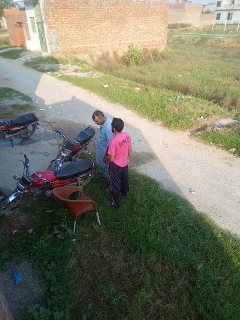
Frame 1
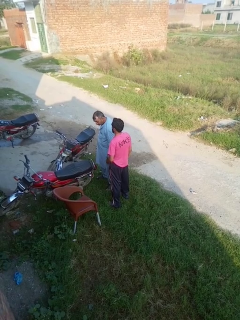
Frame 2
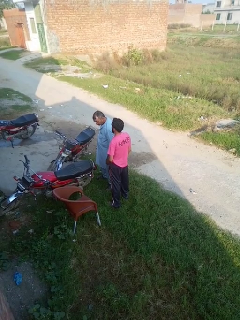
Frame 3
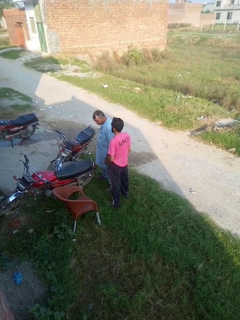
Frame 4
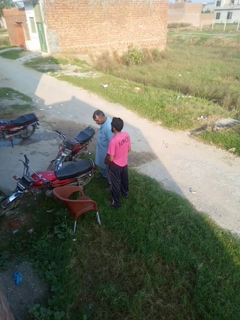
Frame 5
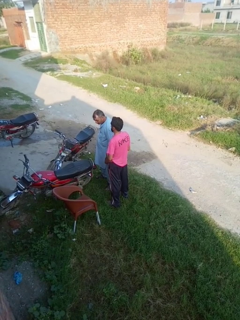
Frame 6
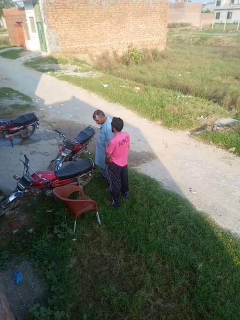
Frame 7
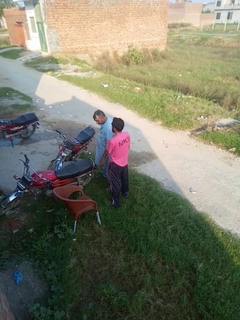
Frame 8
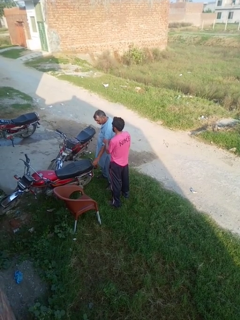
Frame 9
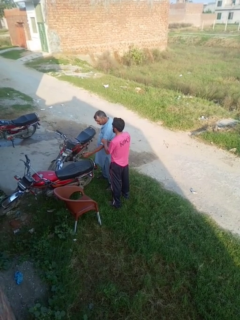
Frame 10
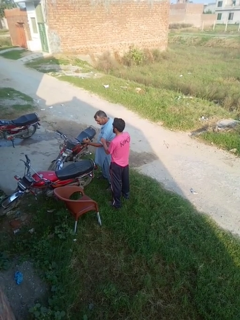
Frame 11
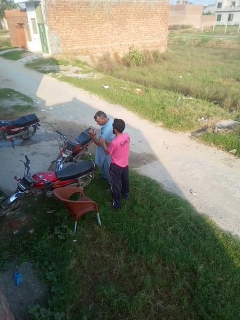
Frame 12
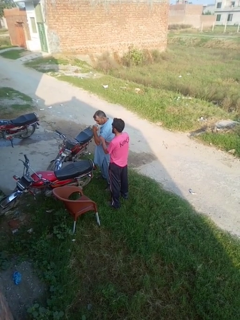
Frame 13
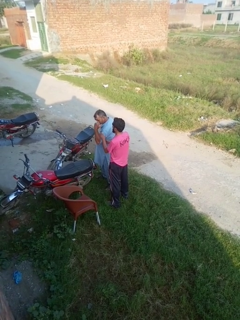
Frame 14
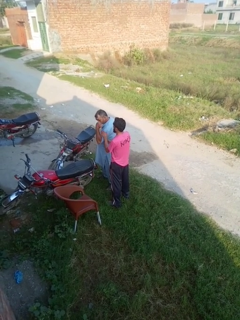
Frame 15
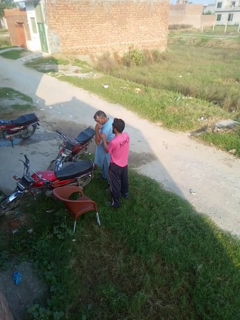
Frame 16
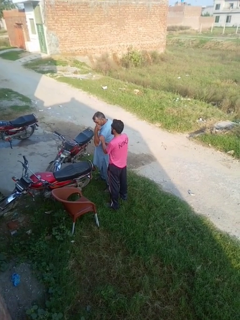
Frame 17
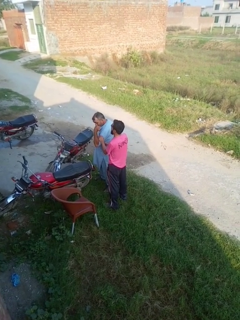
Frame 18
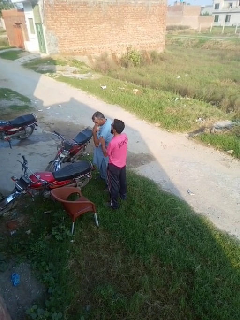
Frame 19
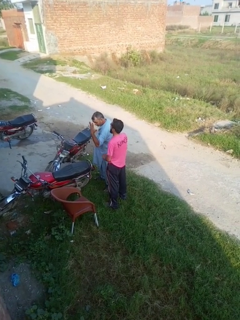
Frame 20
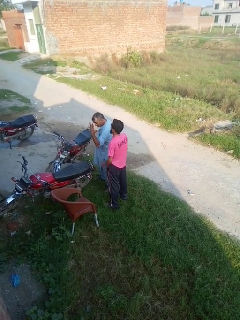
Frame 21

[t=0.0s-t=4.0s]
person grabs person by bicep

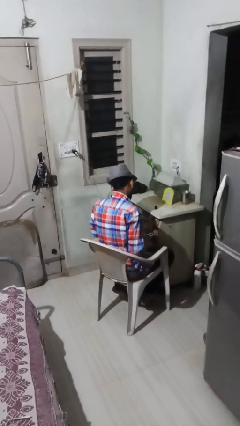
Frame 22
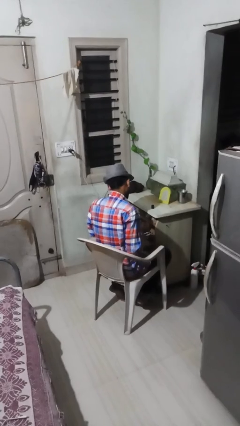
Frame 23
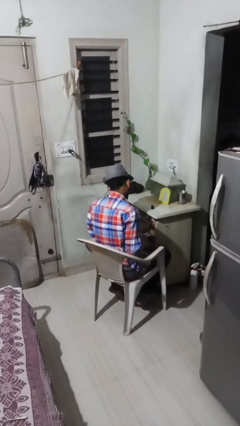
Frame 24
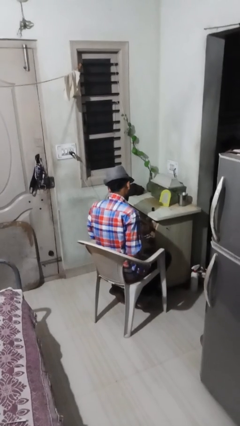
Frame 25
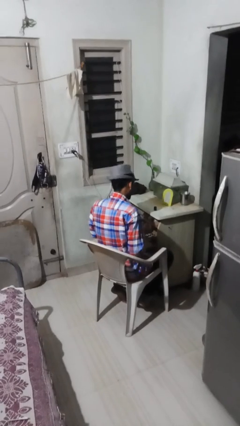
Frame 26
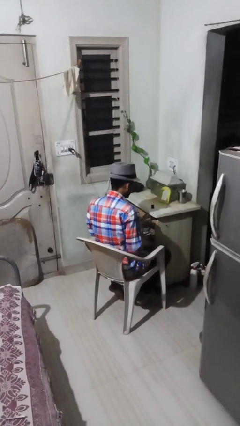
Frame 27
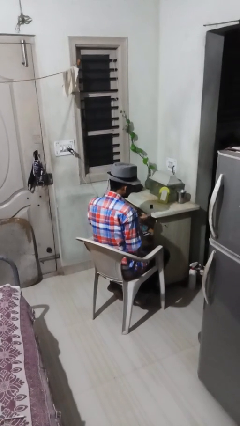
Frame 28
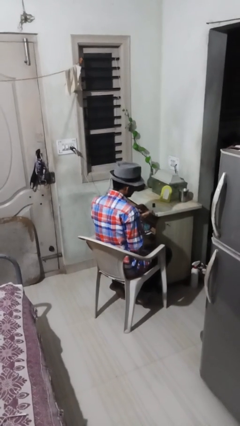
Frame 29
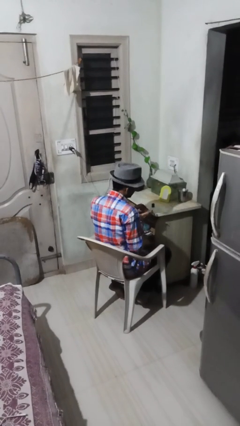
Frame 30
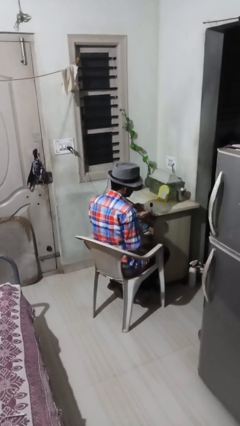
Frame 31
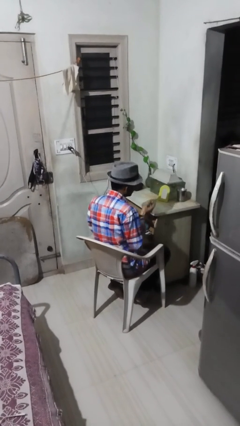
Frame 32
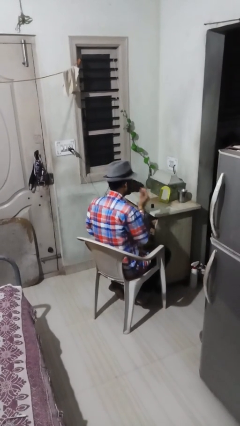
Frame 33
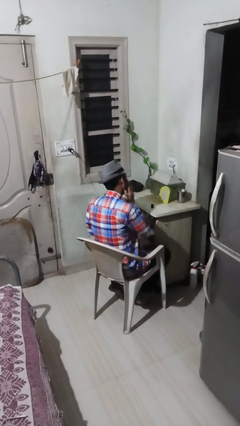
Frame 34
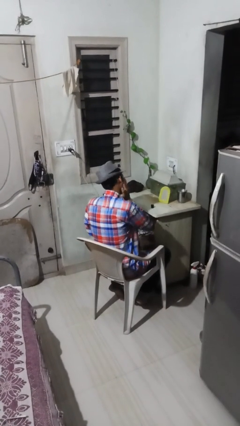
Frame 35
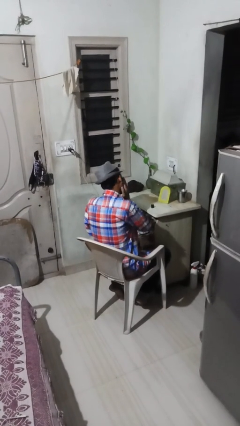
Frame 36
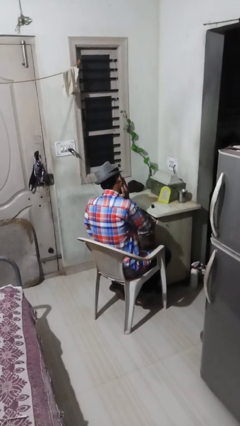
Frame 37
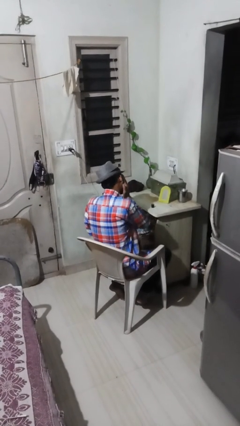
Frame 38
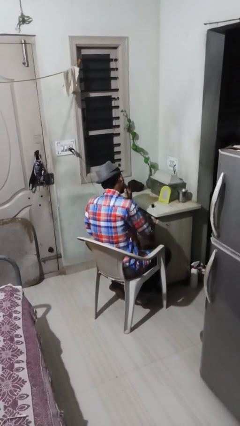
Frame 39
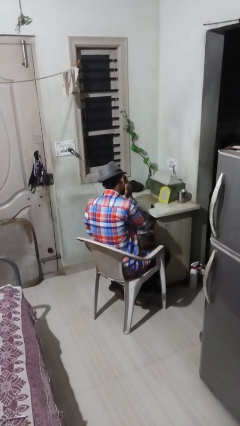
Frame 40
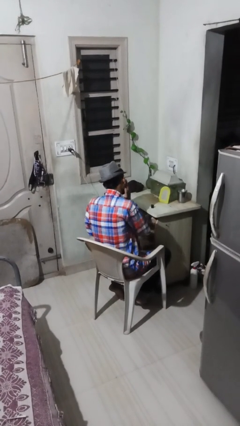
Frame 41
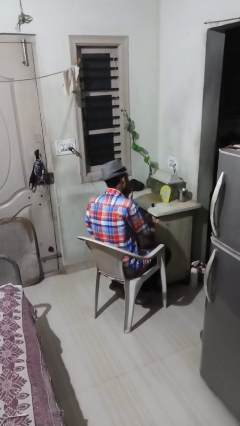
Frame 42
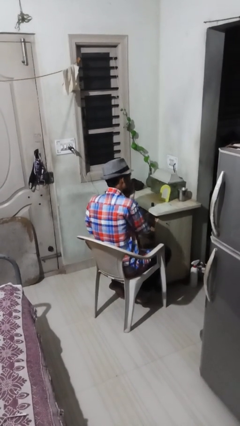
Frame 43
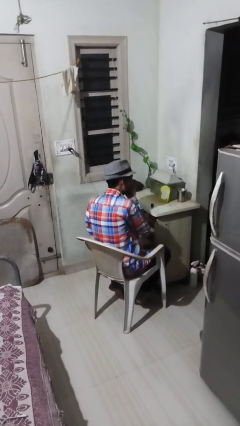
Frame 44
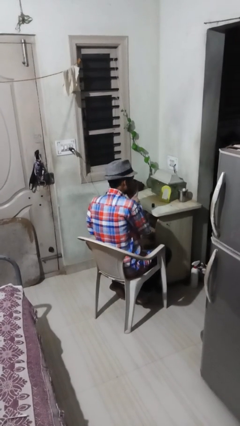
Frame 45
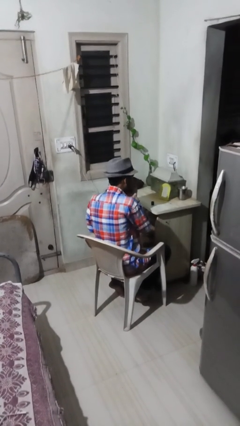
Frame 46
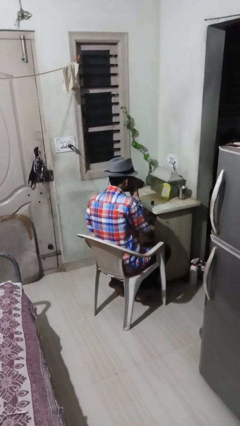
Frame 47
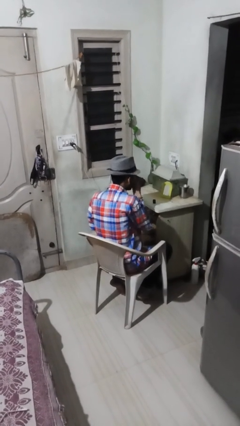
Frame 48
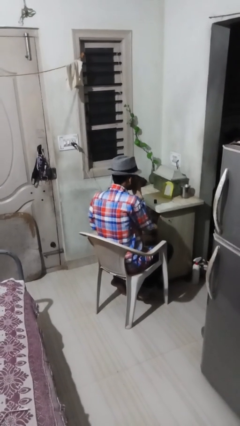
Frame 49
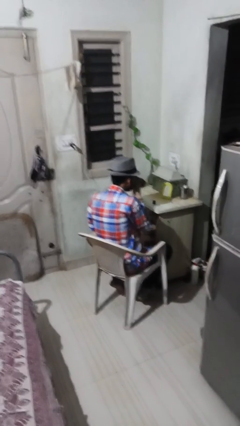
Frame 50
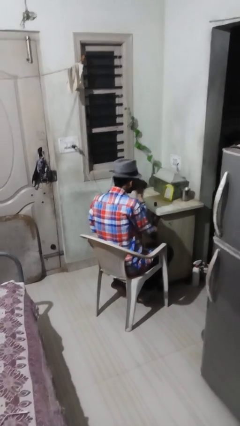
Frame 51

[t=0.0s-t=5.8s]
person applies foundation makeup

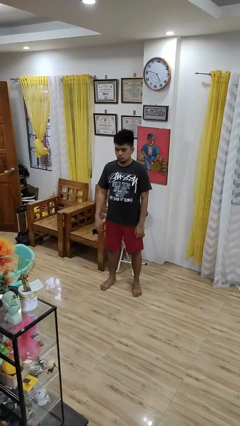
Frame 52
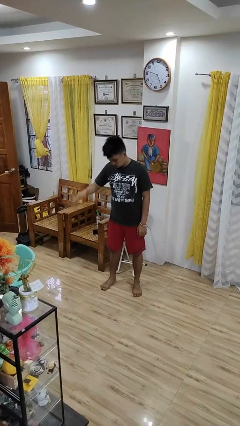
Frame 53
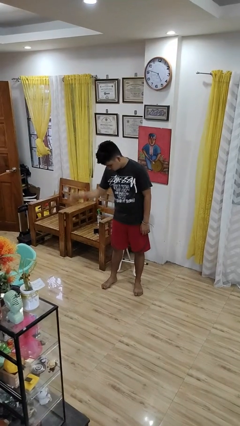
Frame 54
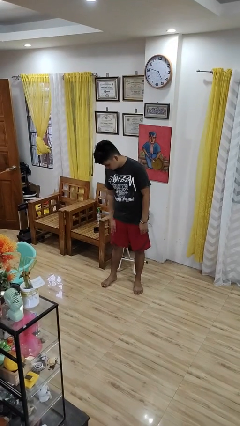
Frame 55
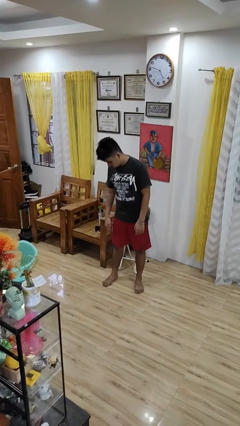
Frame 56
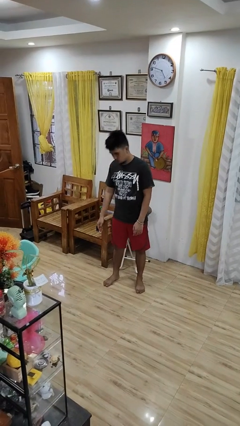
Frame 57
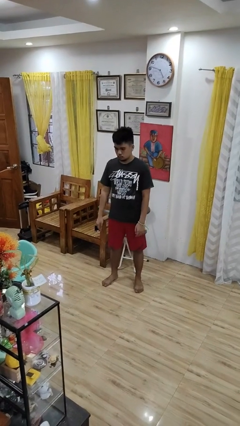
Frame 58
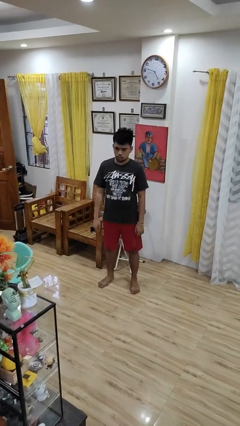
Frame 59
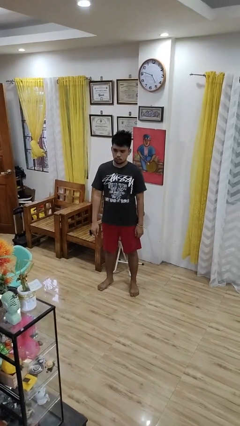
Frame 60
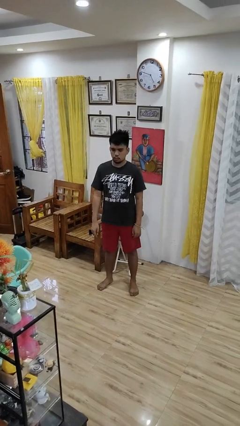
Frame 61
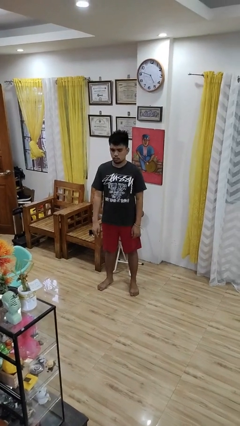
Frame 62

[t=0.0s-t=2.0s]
person slaps hands on thighs

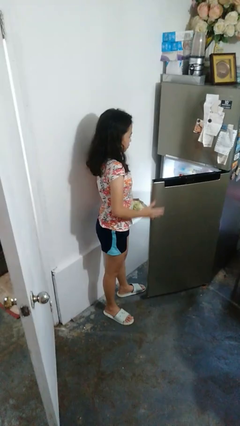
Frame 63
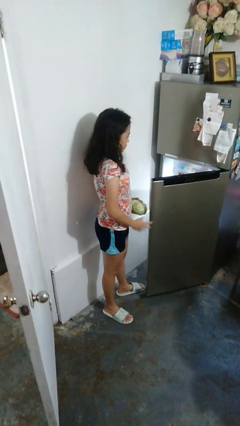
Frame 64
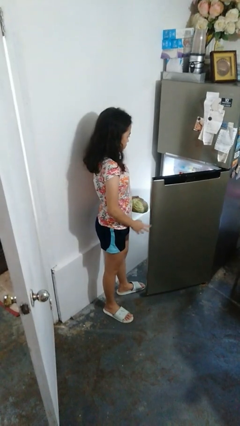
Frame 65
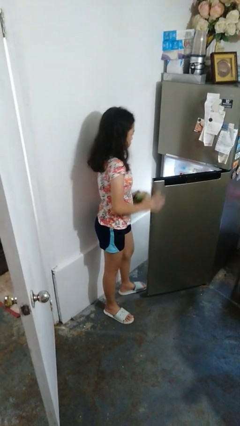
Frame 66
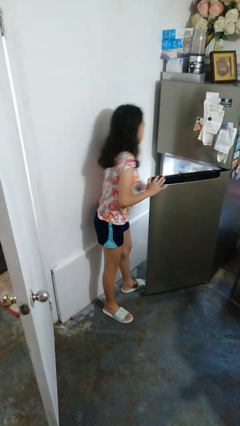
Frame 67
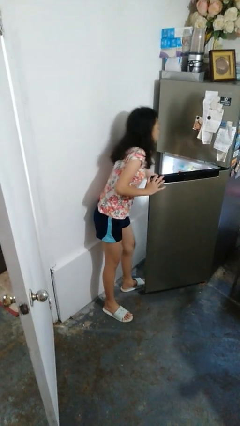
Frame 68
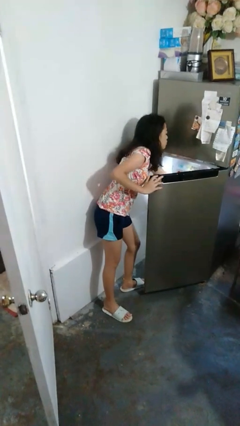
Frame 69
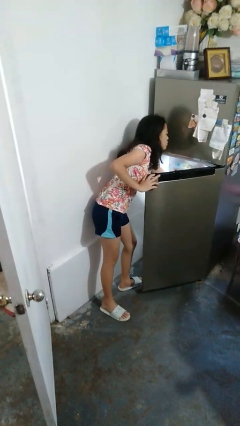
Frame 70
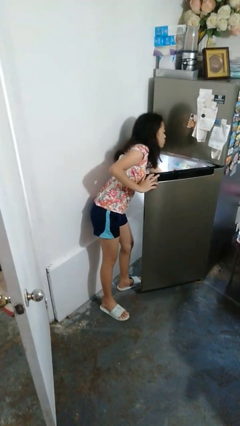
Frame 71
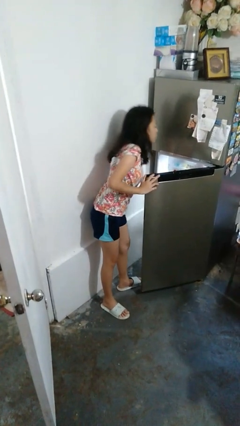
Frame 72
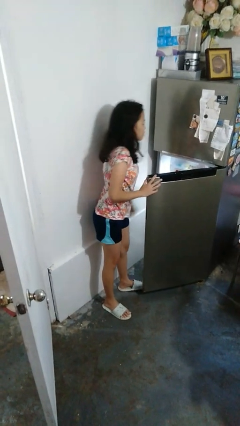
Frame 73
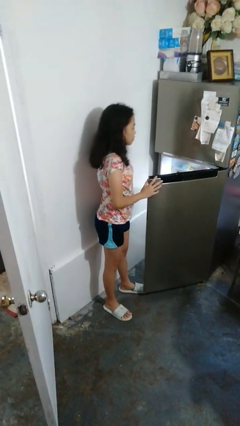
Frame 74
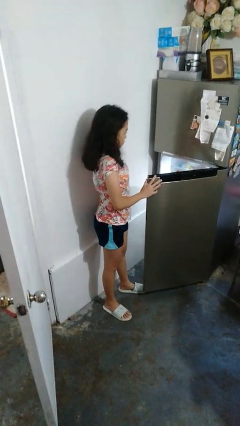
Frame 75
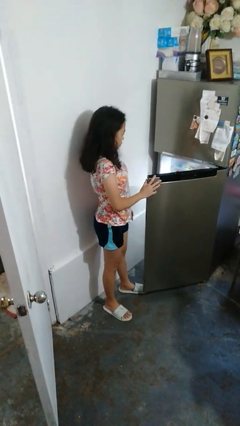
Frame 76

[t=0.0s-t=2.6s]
person puts object into refrigerator

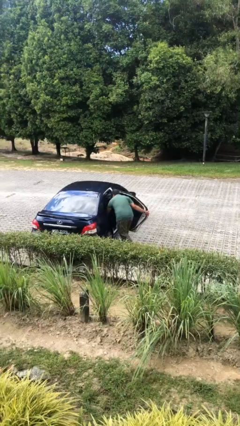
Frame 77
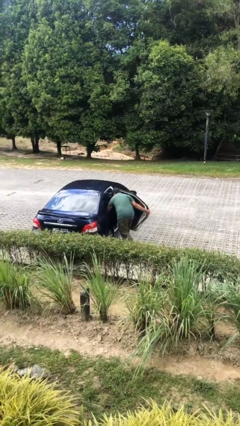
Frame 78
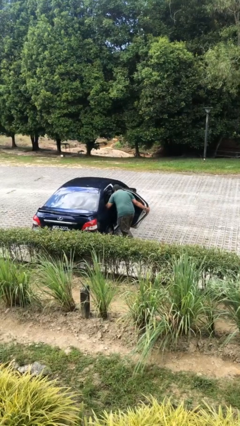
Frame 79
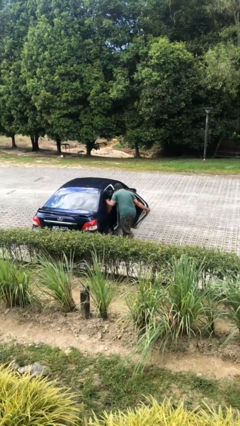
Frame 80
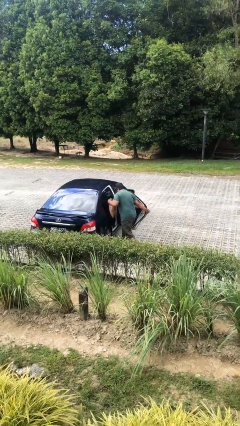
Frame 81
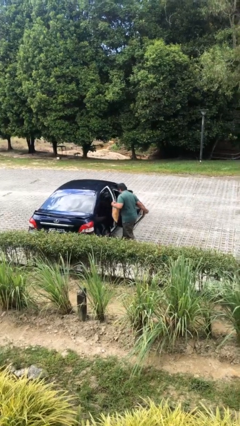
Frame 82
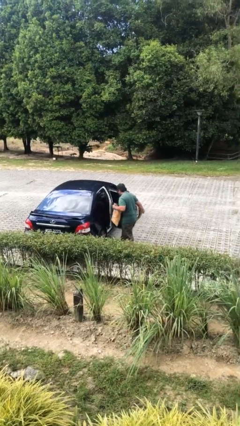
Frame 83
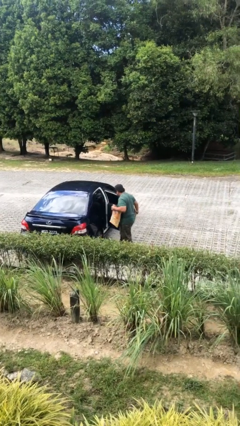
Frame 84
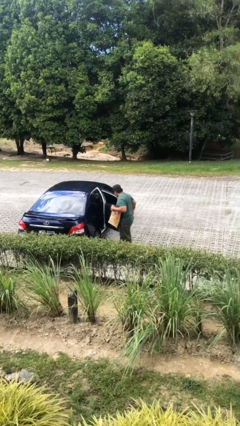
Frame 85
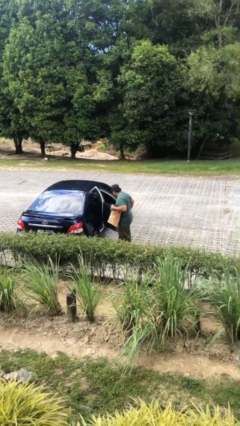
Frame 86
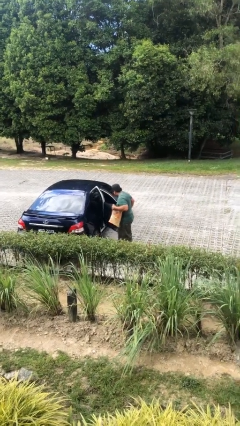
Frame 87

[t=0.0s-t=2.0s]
person unloads car

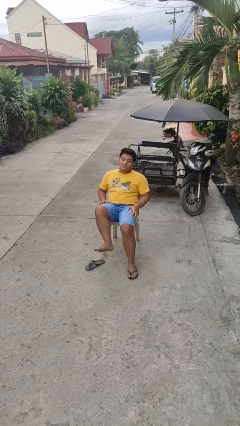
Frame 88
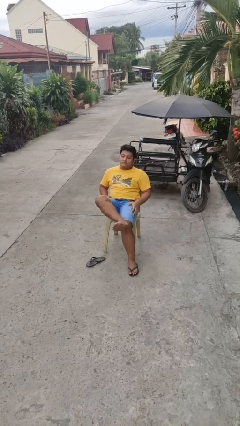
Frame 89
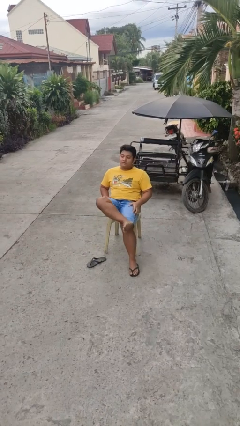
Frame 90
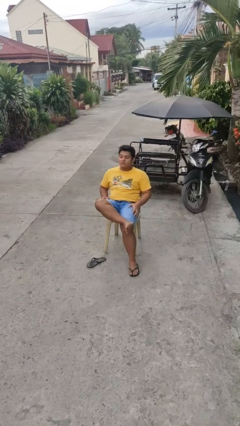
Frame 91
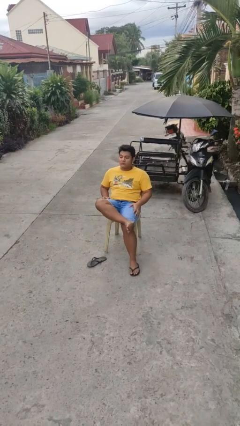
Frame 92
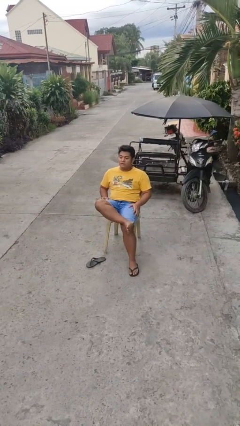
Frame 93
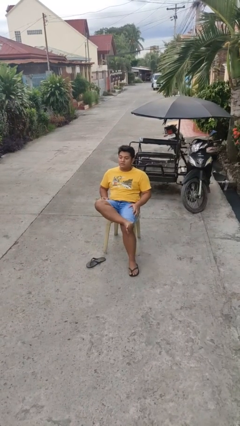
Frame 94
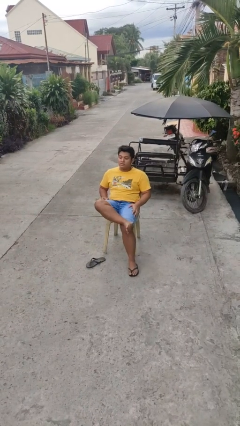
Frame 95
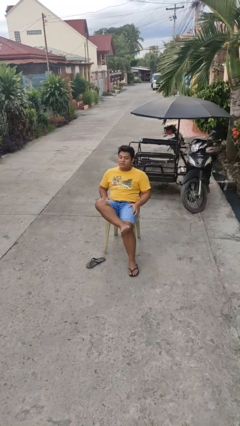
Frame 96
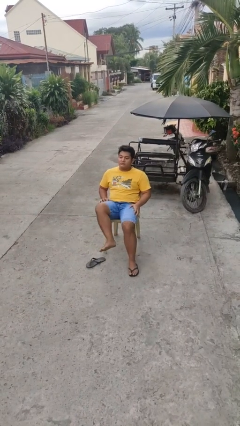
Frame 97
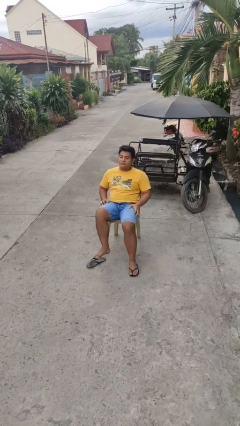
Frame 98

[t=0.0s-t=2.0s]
person crosses legs
